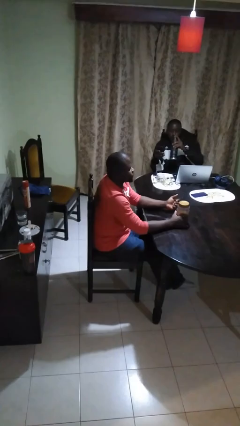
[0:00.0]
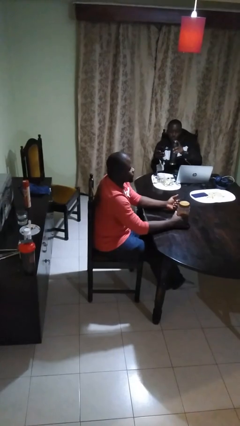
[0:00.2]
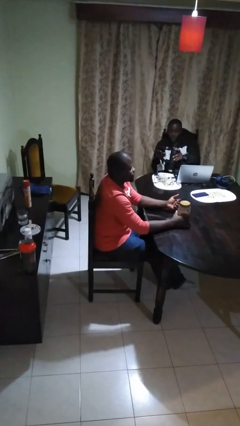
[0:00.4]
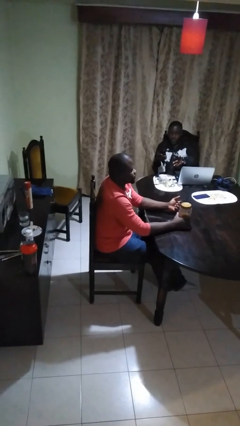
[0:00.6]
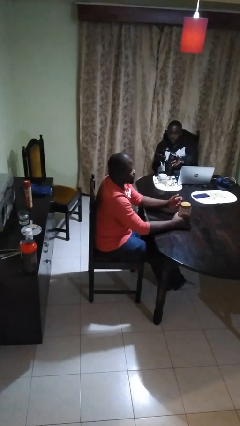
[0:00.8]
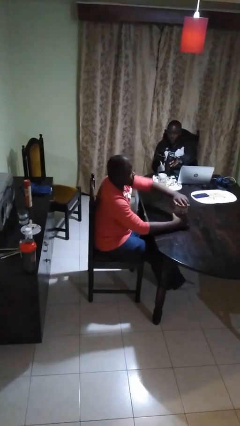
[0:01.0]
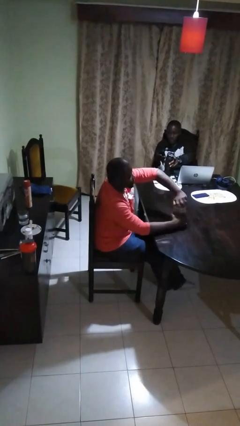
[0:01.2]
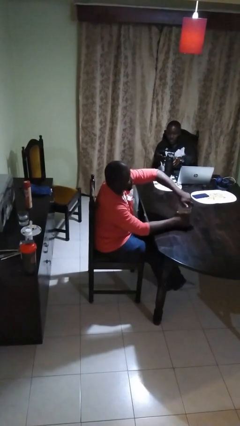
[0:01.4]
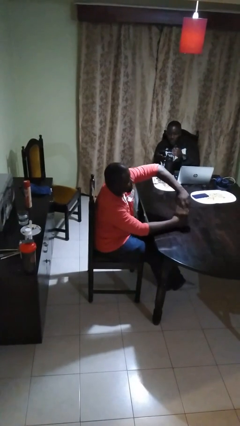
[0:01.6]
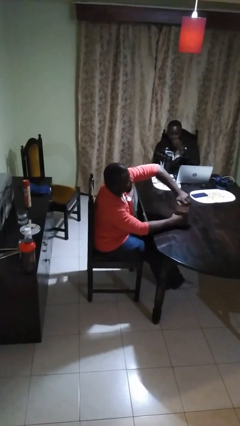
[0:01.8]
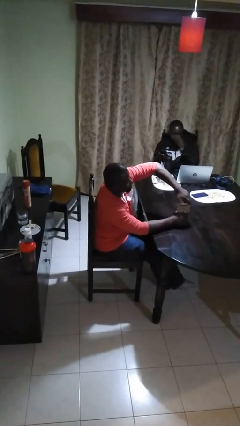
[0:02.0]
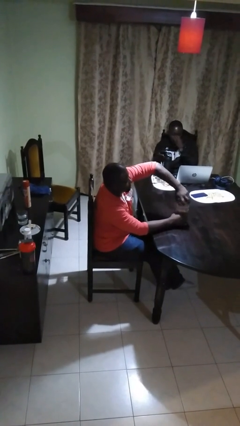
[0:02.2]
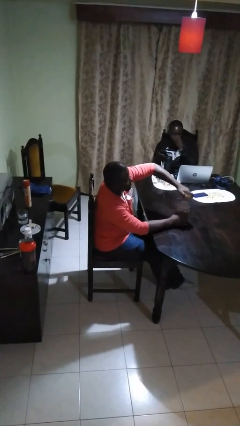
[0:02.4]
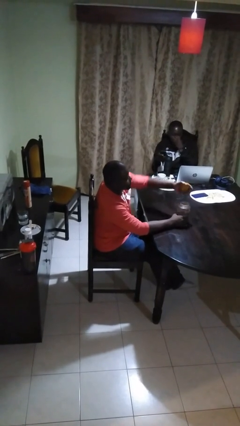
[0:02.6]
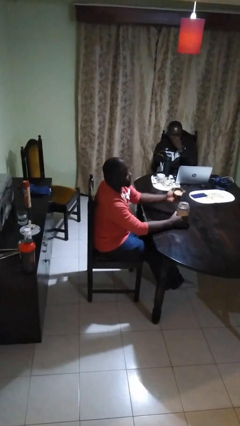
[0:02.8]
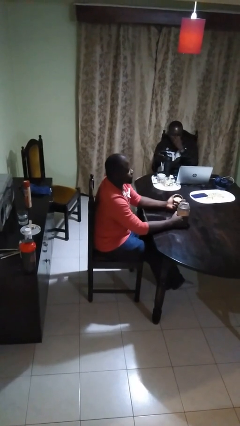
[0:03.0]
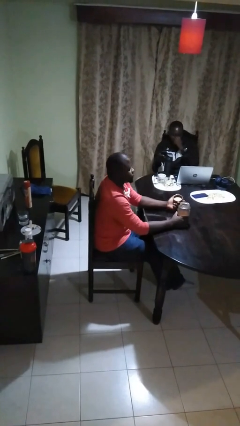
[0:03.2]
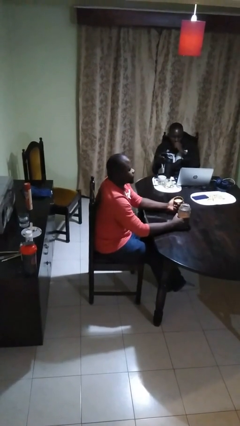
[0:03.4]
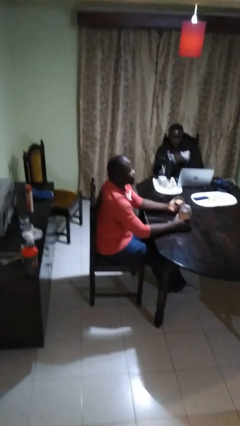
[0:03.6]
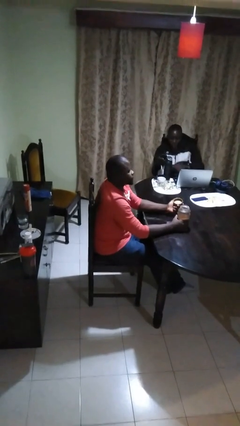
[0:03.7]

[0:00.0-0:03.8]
person opens jar

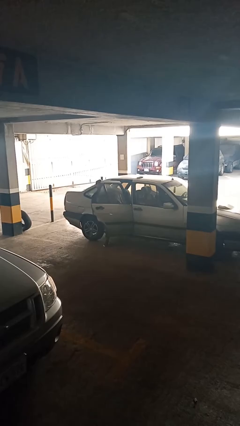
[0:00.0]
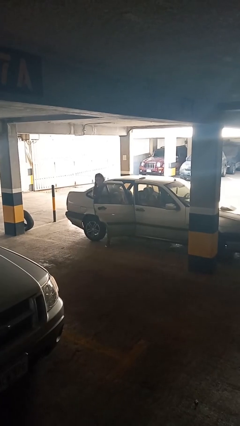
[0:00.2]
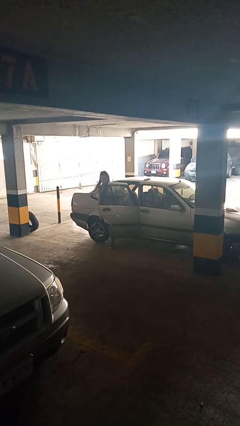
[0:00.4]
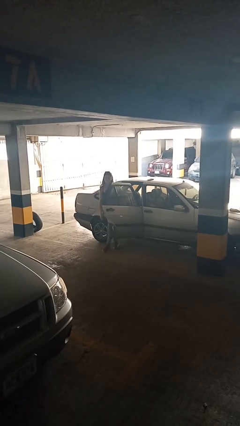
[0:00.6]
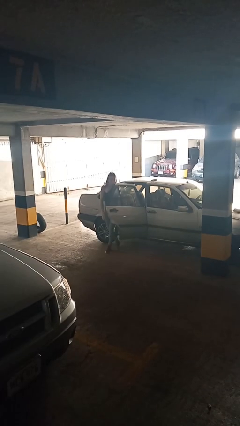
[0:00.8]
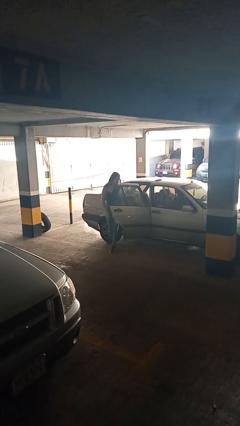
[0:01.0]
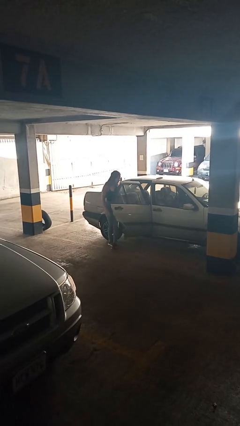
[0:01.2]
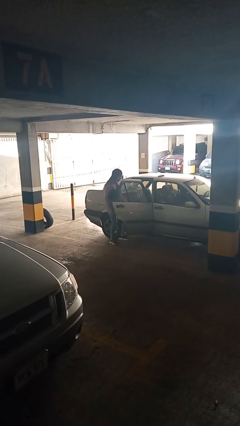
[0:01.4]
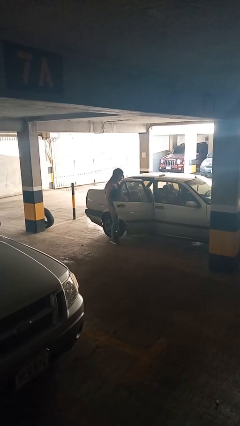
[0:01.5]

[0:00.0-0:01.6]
person exits car

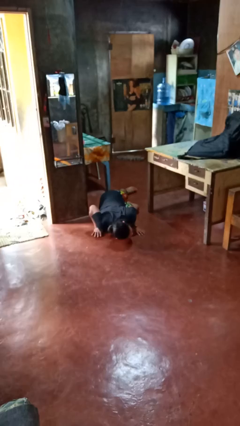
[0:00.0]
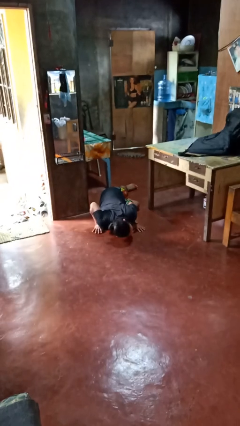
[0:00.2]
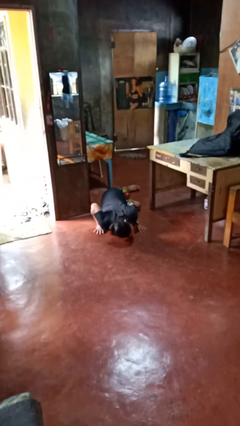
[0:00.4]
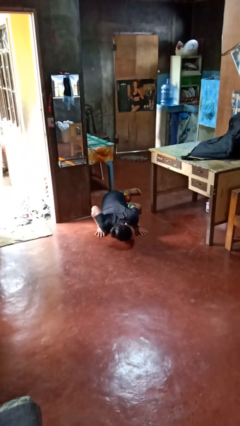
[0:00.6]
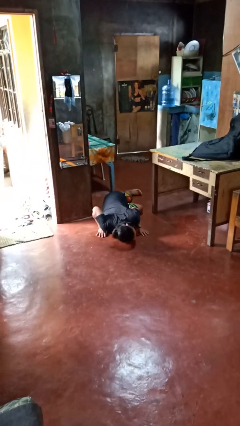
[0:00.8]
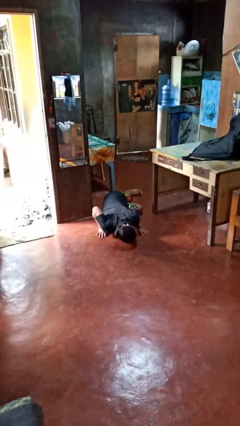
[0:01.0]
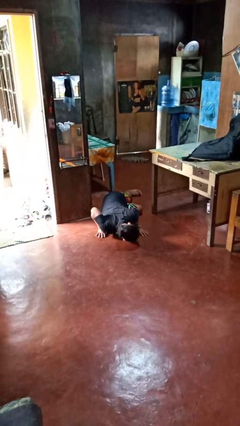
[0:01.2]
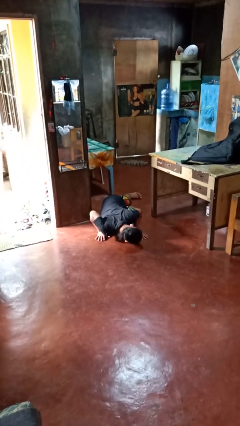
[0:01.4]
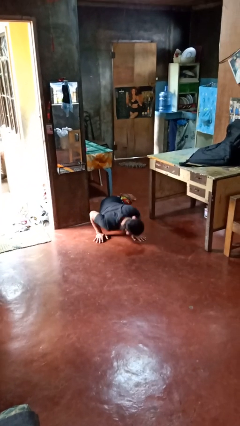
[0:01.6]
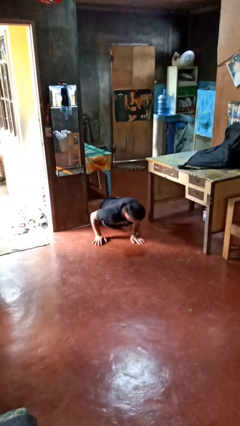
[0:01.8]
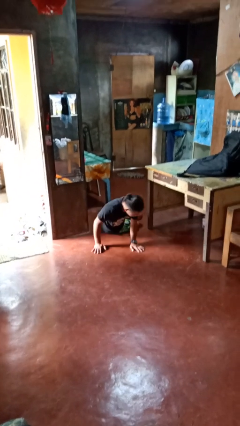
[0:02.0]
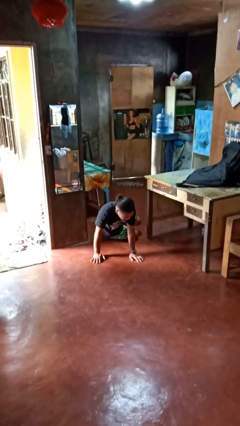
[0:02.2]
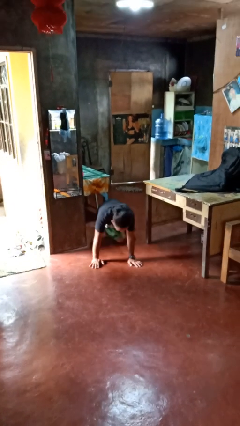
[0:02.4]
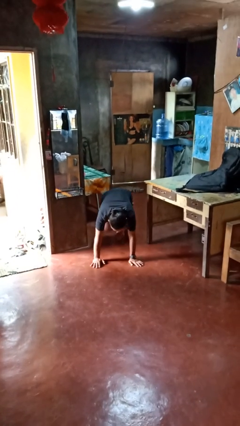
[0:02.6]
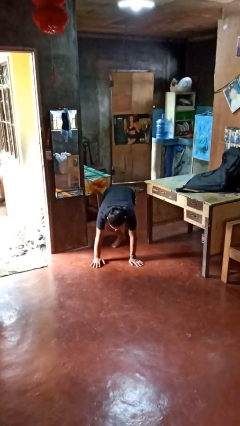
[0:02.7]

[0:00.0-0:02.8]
person lies down on floor

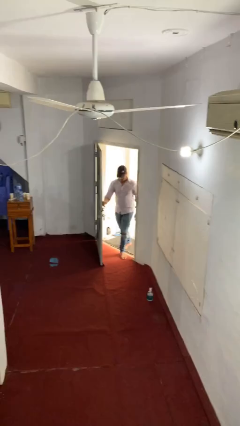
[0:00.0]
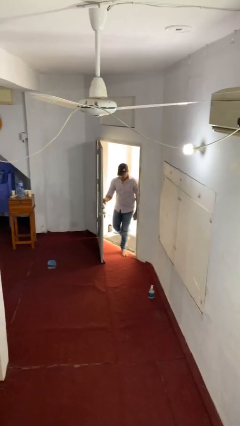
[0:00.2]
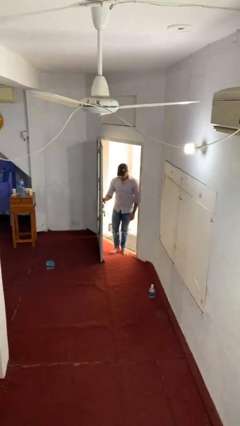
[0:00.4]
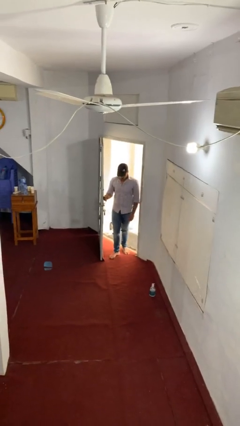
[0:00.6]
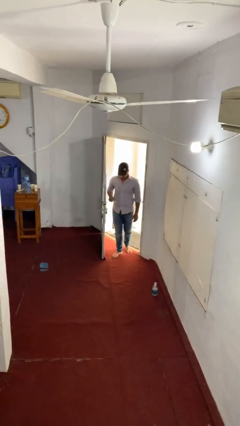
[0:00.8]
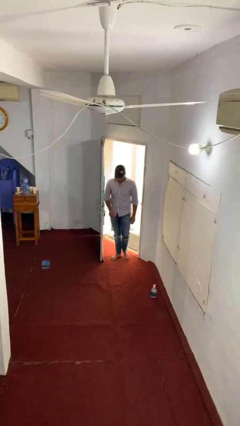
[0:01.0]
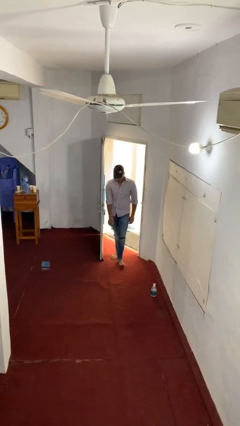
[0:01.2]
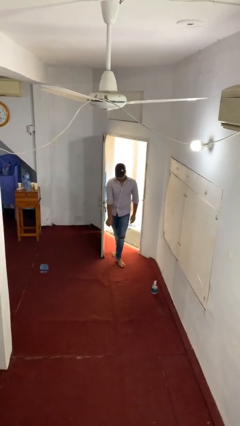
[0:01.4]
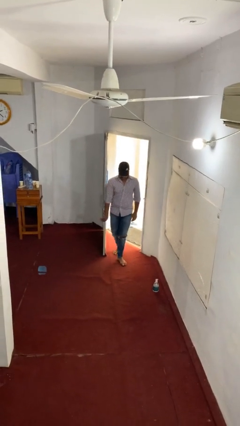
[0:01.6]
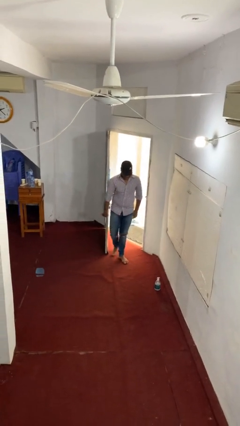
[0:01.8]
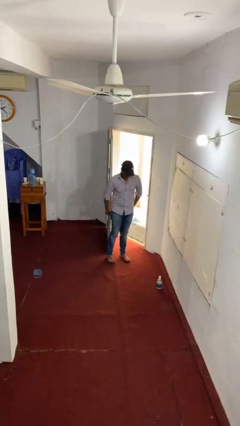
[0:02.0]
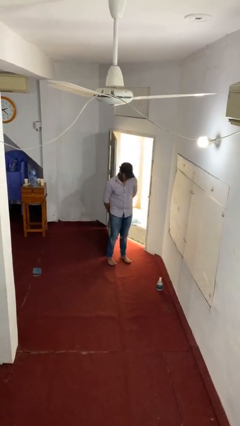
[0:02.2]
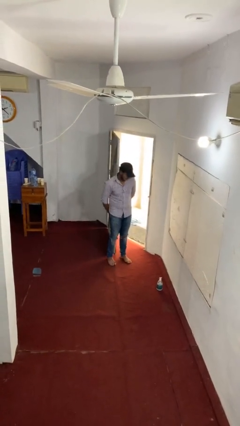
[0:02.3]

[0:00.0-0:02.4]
person enters scene through structure

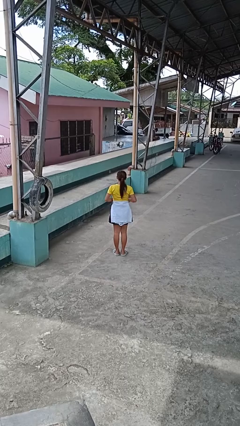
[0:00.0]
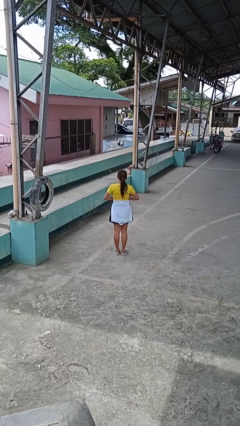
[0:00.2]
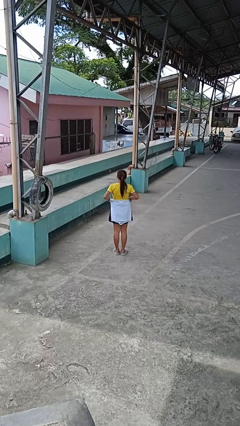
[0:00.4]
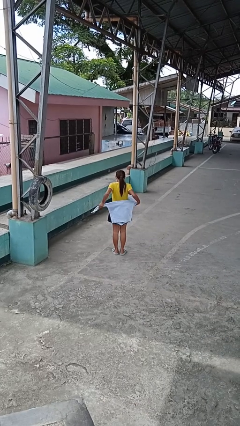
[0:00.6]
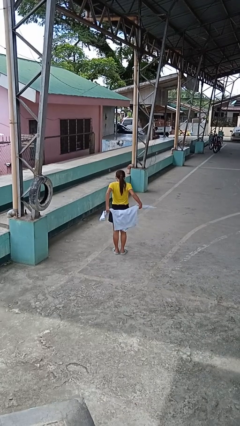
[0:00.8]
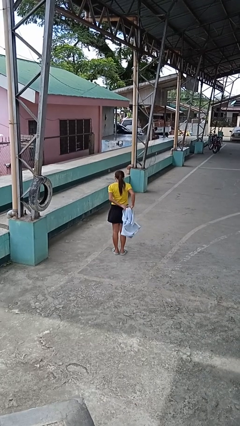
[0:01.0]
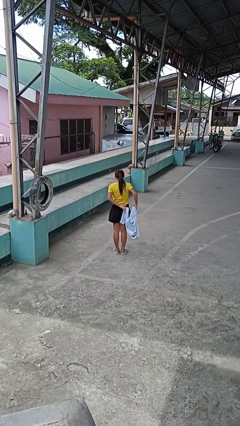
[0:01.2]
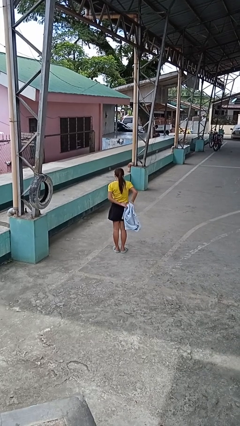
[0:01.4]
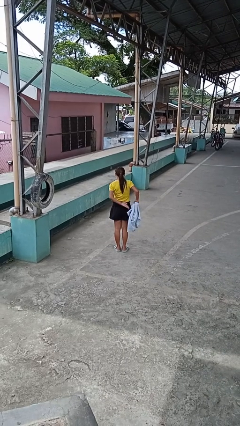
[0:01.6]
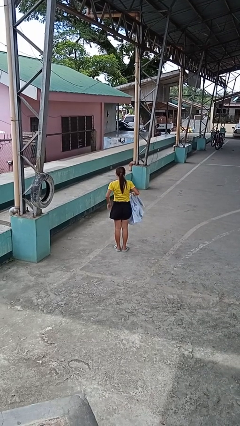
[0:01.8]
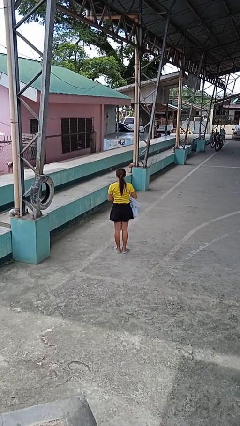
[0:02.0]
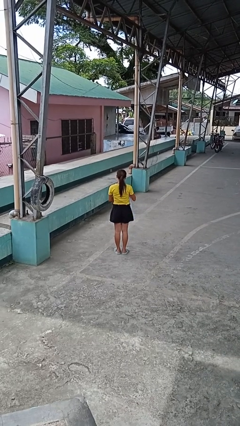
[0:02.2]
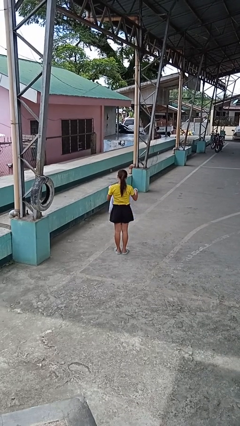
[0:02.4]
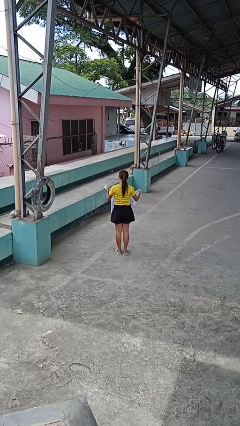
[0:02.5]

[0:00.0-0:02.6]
person unties jacket around waist

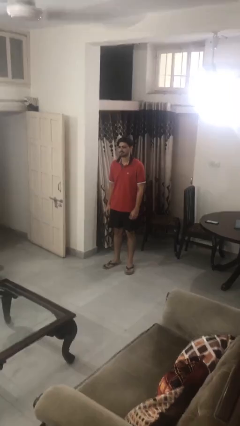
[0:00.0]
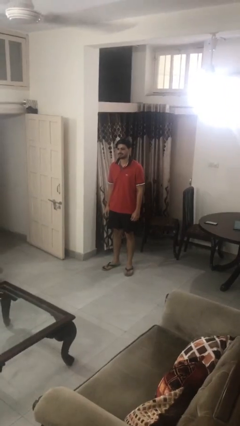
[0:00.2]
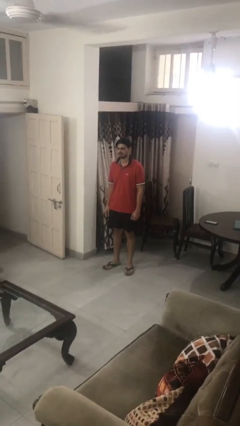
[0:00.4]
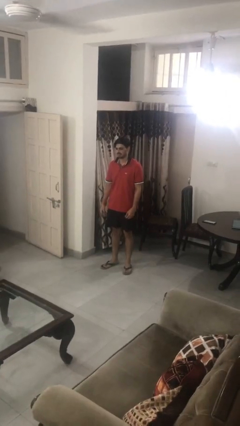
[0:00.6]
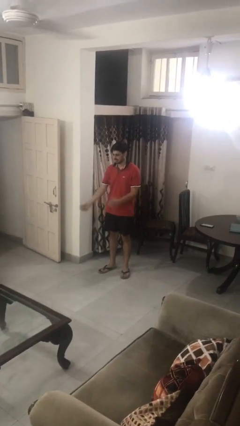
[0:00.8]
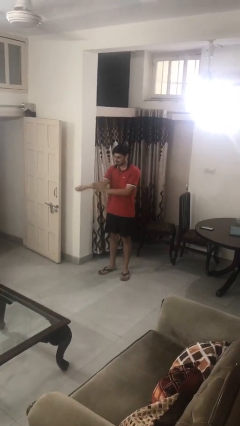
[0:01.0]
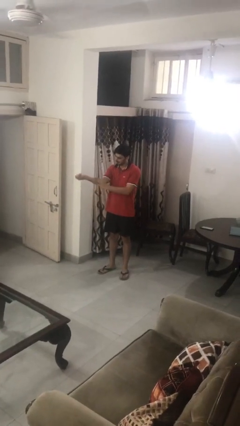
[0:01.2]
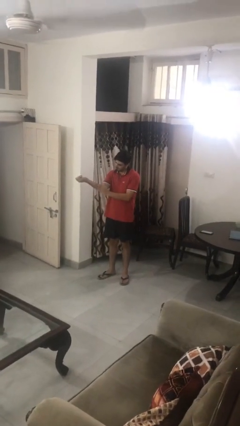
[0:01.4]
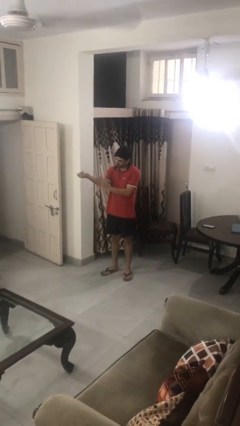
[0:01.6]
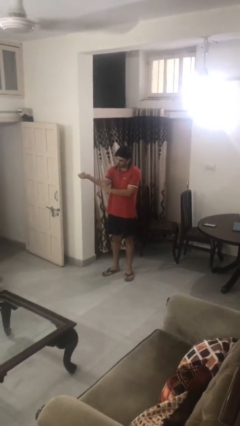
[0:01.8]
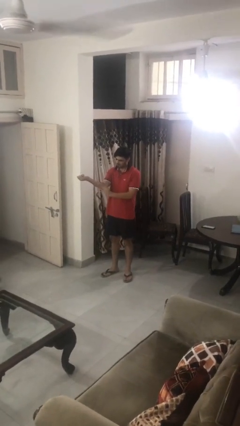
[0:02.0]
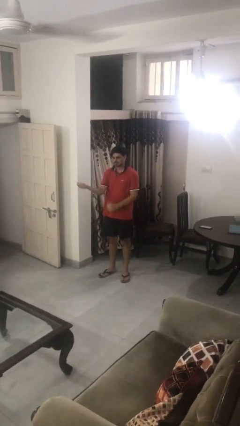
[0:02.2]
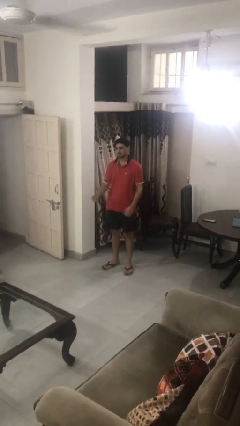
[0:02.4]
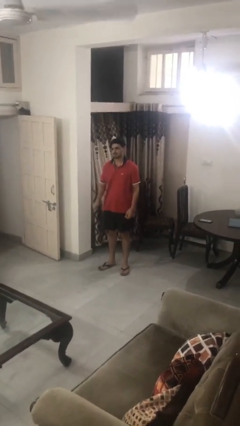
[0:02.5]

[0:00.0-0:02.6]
person swats bug

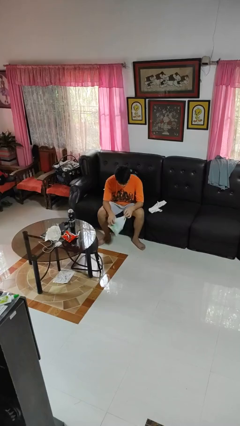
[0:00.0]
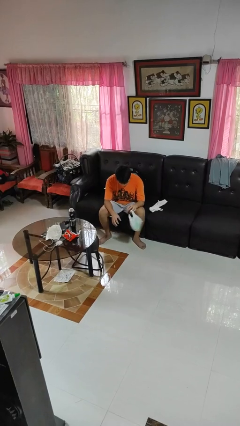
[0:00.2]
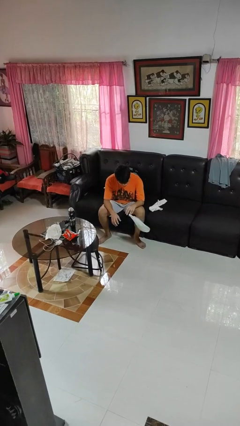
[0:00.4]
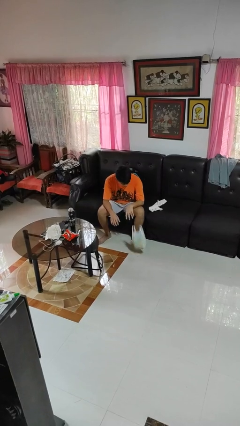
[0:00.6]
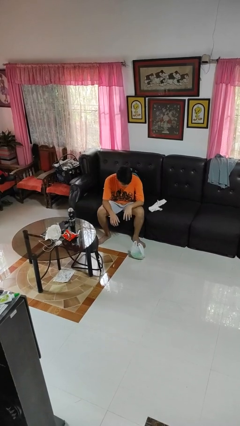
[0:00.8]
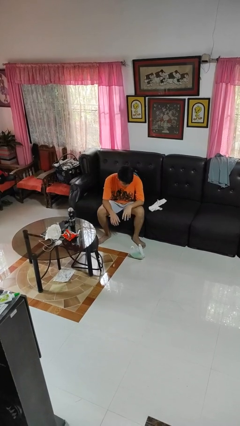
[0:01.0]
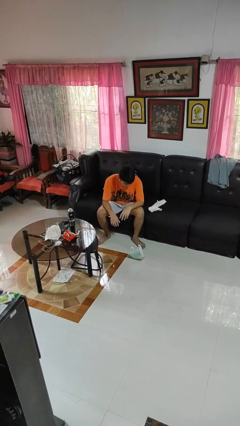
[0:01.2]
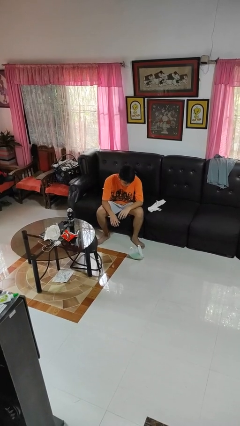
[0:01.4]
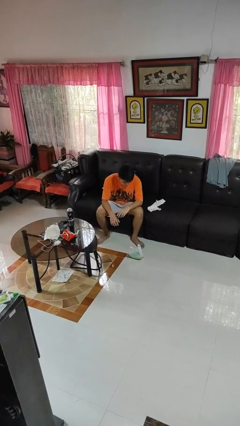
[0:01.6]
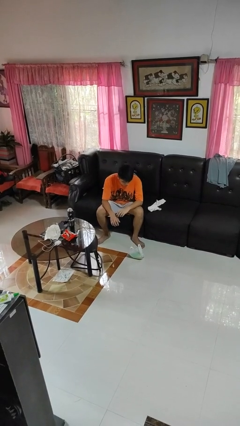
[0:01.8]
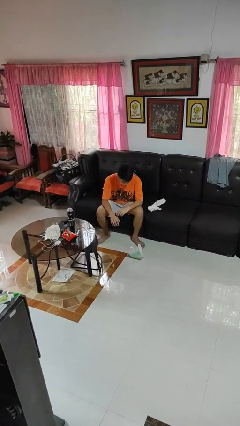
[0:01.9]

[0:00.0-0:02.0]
person drops object
